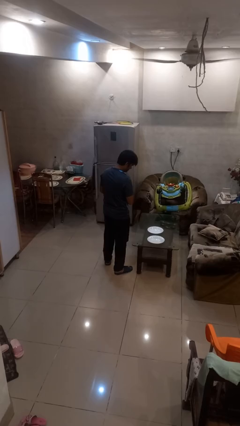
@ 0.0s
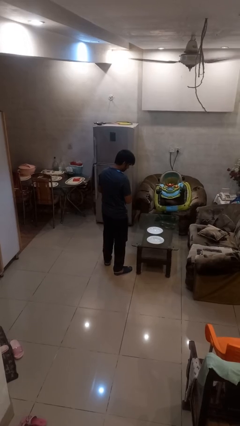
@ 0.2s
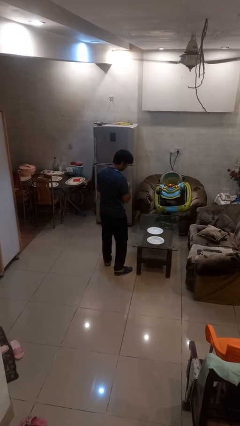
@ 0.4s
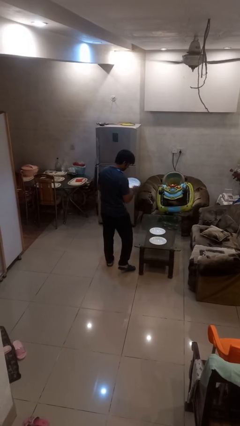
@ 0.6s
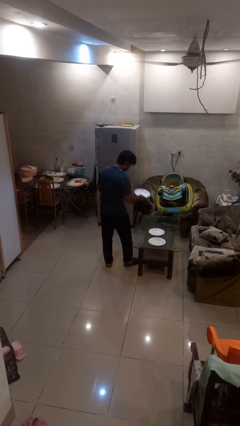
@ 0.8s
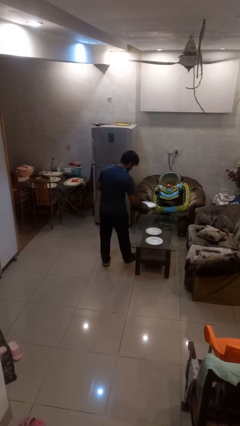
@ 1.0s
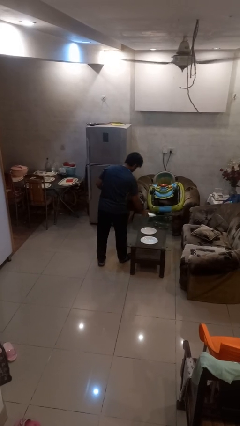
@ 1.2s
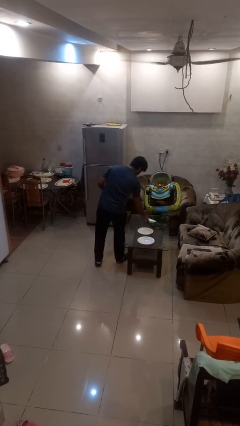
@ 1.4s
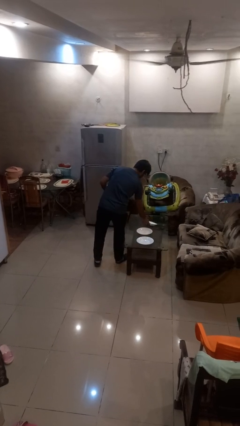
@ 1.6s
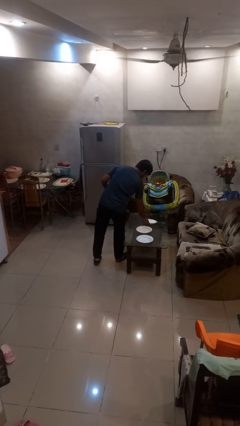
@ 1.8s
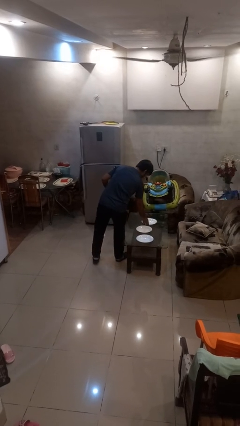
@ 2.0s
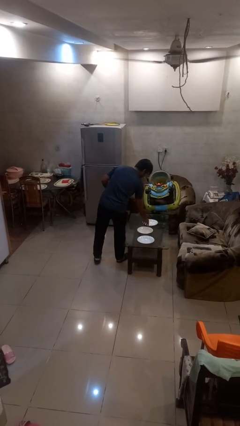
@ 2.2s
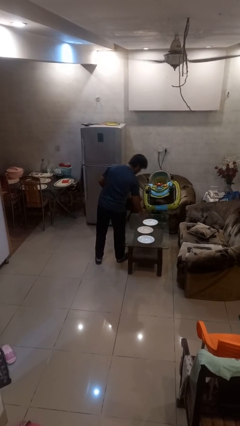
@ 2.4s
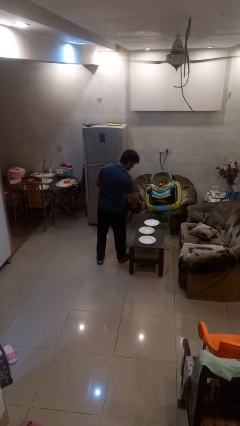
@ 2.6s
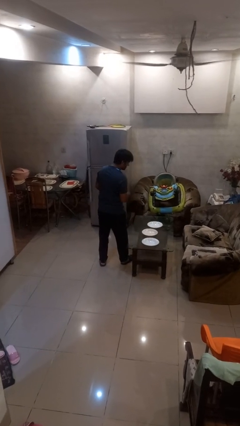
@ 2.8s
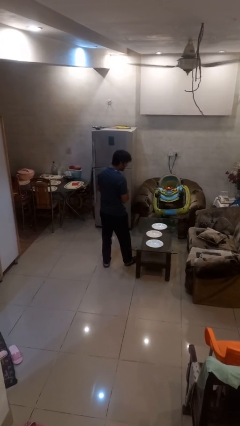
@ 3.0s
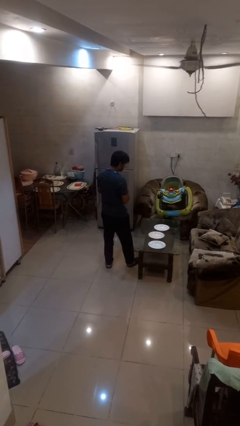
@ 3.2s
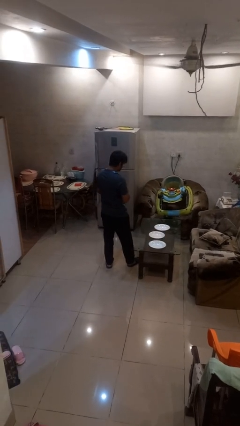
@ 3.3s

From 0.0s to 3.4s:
person sets table

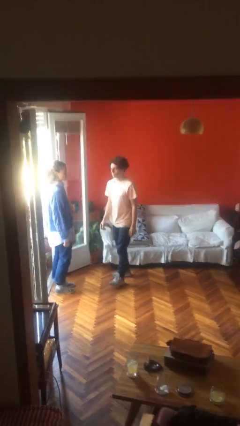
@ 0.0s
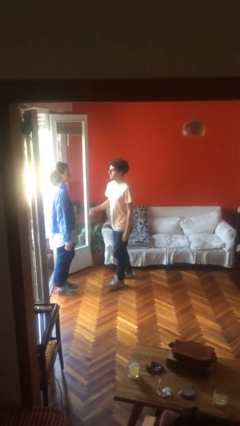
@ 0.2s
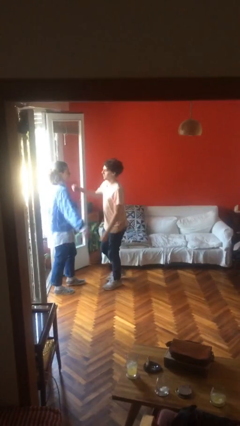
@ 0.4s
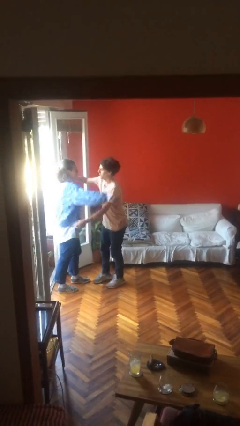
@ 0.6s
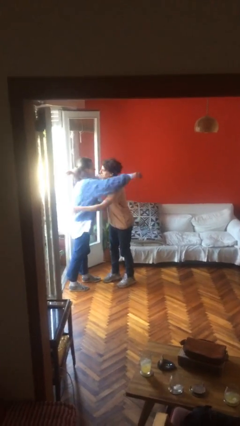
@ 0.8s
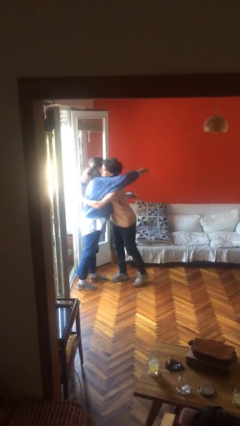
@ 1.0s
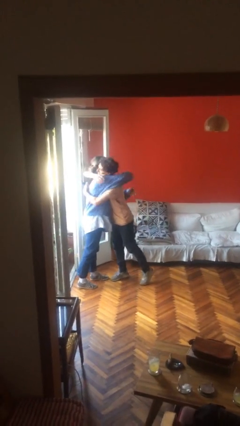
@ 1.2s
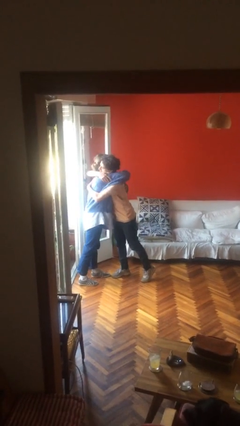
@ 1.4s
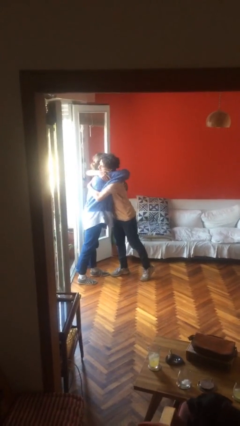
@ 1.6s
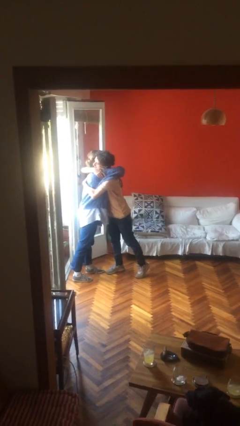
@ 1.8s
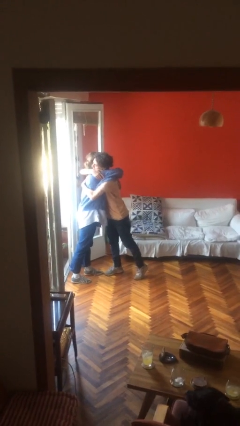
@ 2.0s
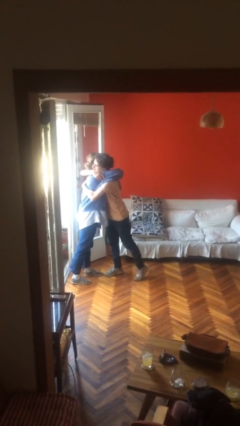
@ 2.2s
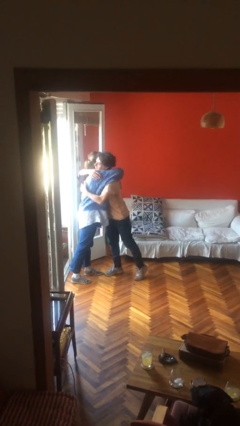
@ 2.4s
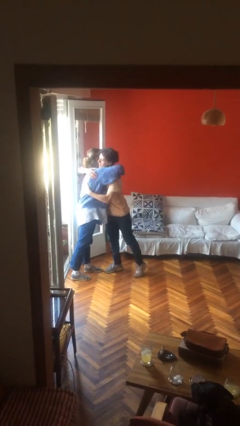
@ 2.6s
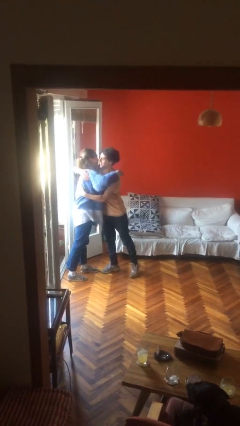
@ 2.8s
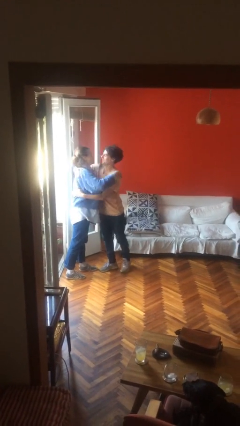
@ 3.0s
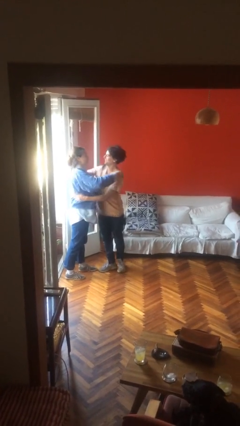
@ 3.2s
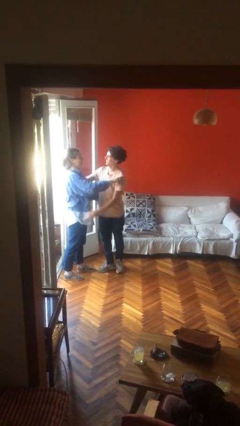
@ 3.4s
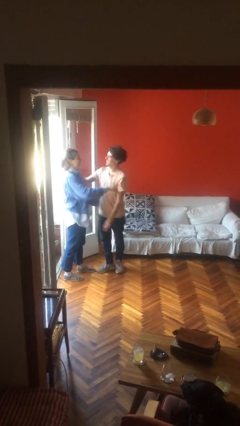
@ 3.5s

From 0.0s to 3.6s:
person embraces person

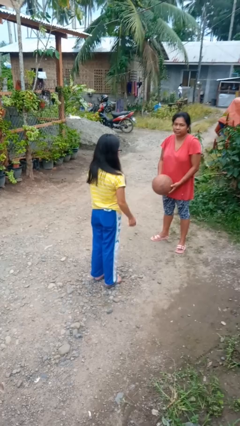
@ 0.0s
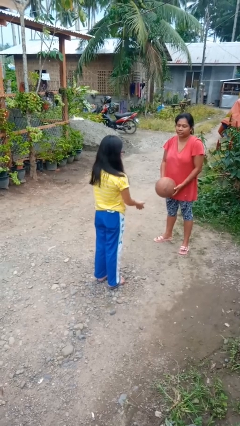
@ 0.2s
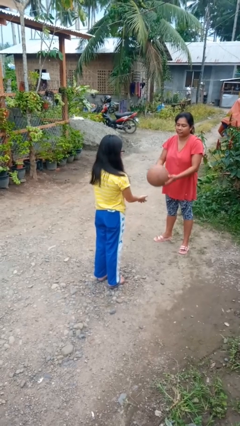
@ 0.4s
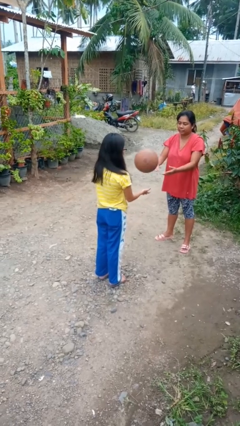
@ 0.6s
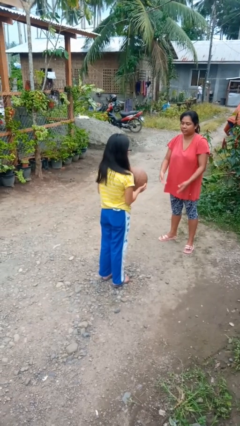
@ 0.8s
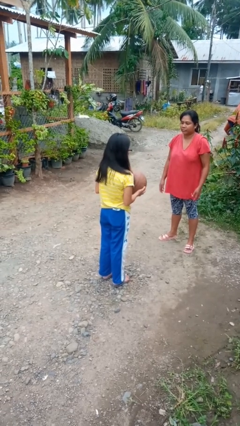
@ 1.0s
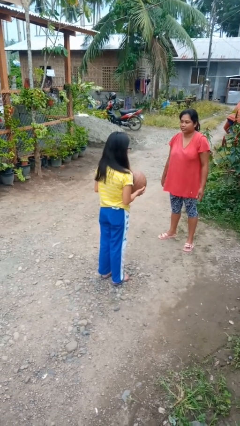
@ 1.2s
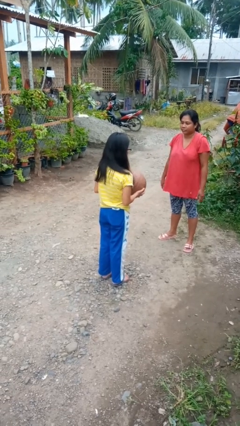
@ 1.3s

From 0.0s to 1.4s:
person catches object from person

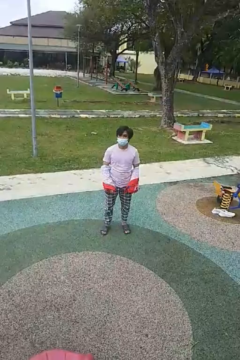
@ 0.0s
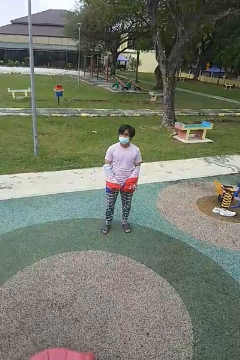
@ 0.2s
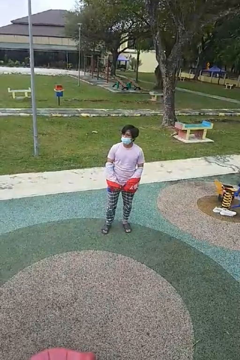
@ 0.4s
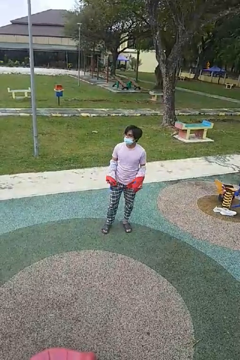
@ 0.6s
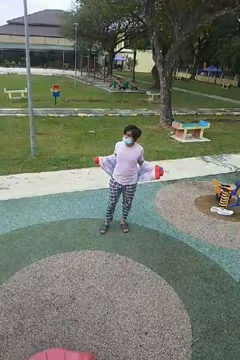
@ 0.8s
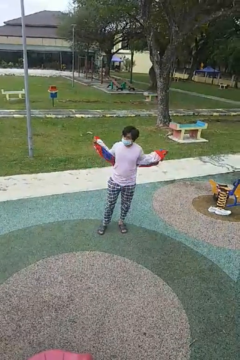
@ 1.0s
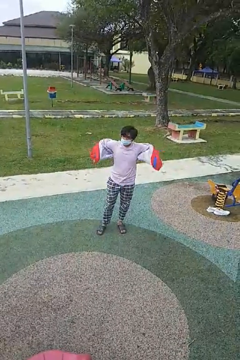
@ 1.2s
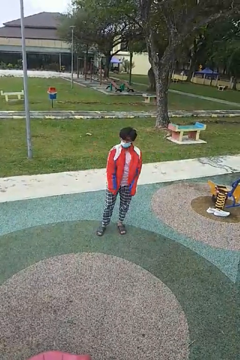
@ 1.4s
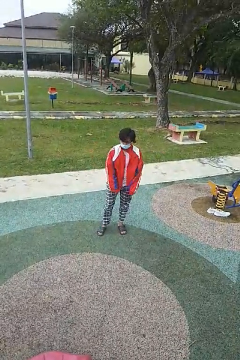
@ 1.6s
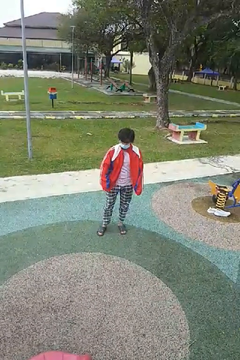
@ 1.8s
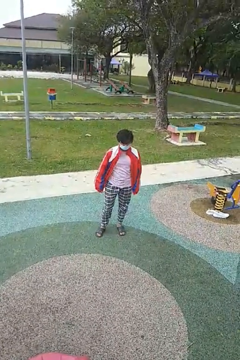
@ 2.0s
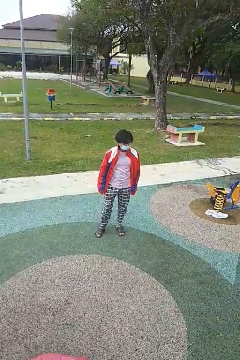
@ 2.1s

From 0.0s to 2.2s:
person puts on jacket

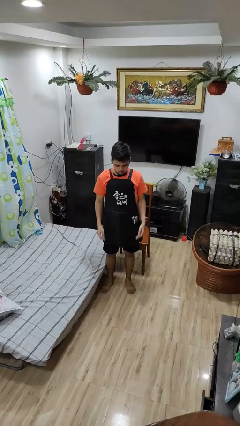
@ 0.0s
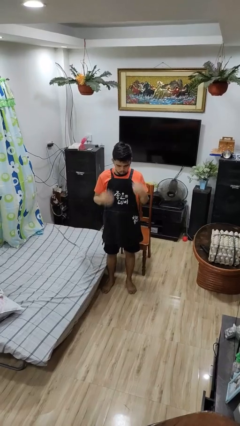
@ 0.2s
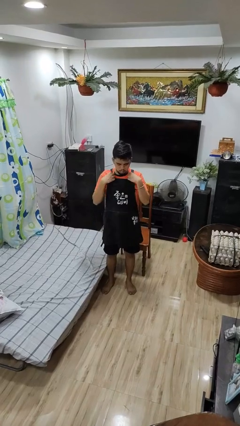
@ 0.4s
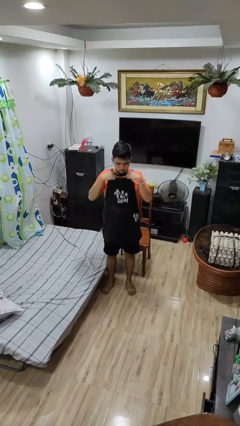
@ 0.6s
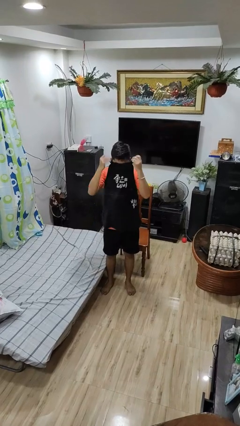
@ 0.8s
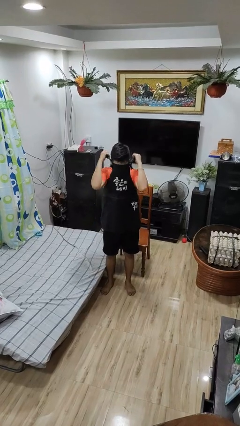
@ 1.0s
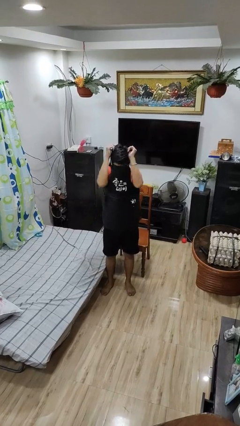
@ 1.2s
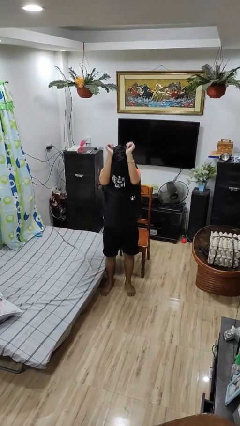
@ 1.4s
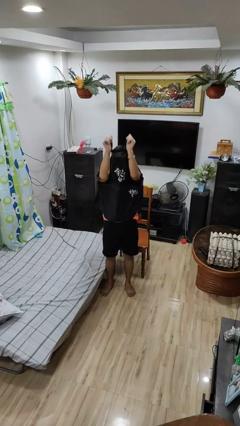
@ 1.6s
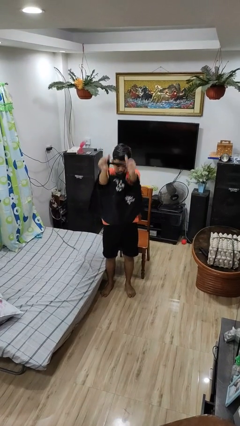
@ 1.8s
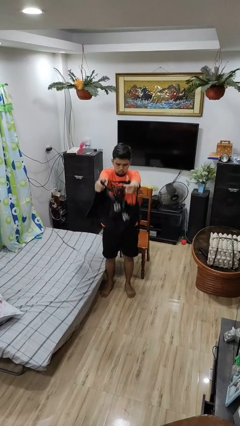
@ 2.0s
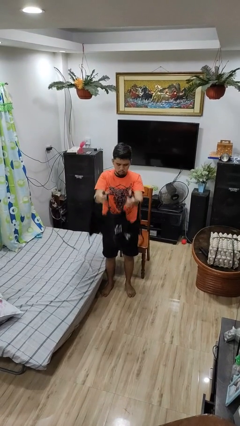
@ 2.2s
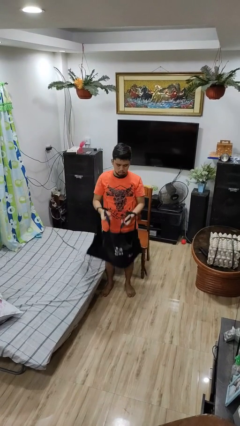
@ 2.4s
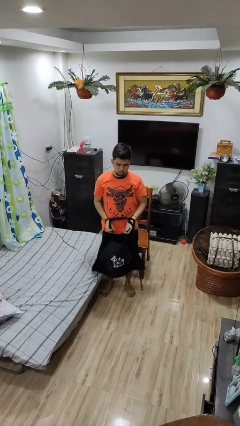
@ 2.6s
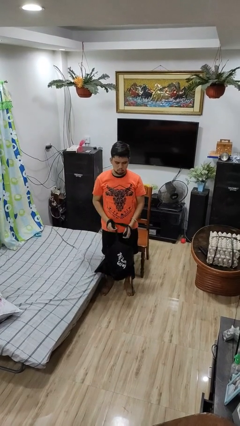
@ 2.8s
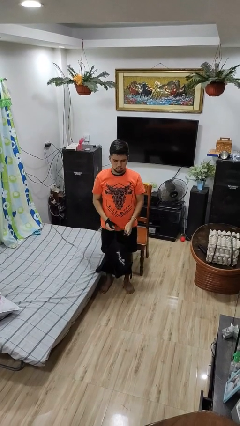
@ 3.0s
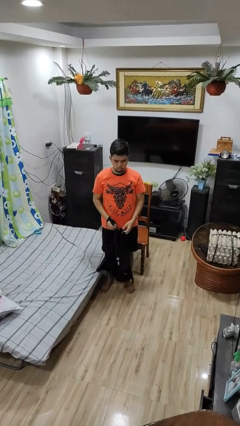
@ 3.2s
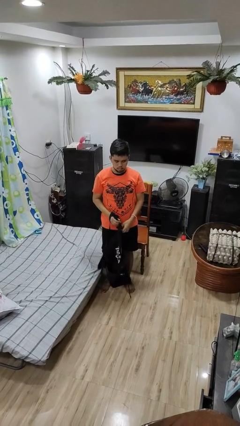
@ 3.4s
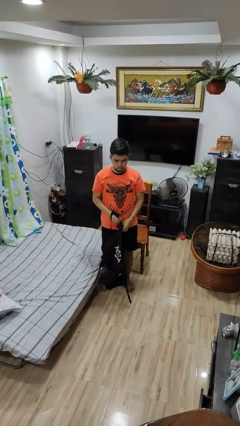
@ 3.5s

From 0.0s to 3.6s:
person takes off apron

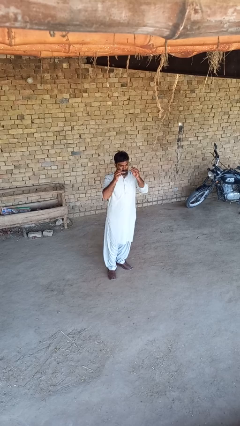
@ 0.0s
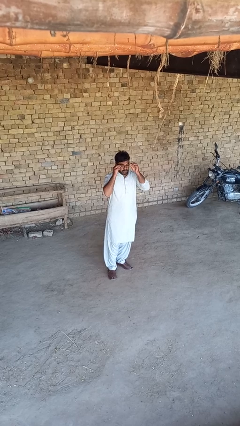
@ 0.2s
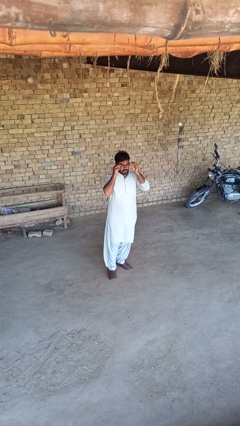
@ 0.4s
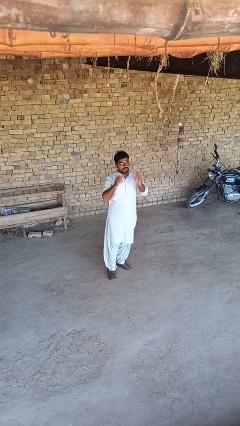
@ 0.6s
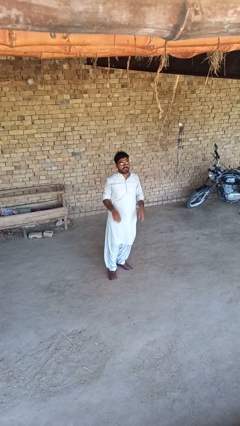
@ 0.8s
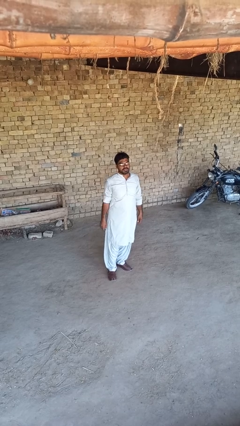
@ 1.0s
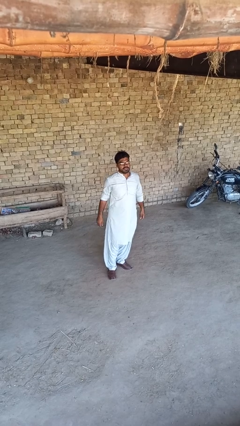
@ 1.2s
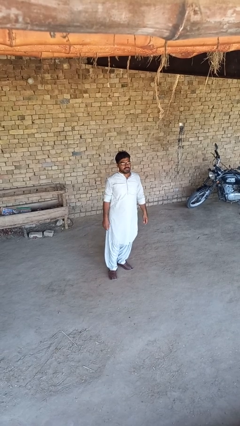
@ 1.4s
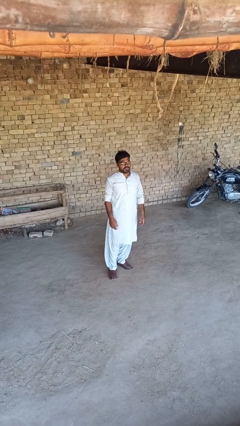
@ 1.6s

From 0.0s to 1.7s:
person puts on glasses

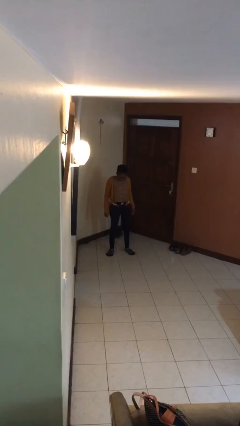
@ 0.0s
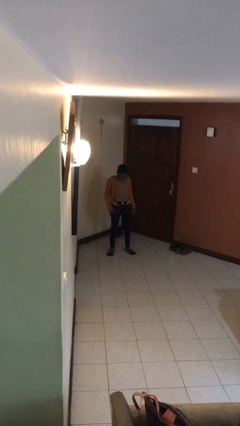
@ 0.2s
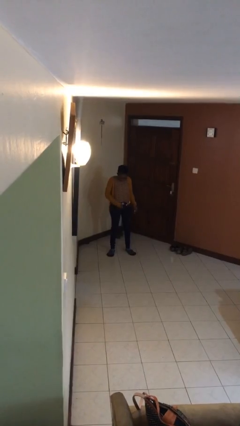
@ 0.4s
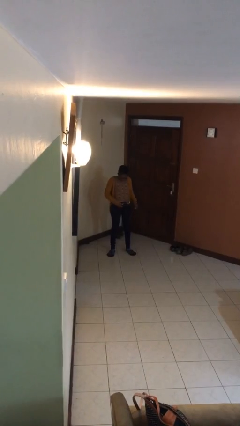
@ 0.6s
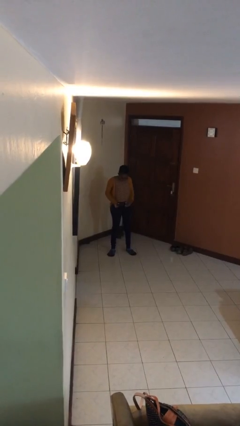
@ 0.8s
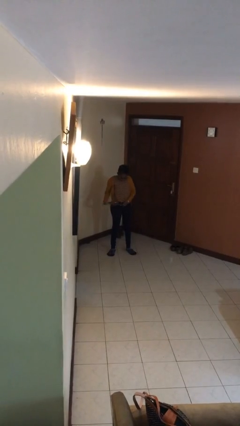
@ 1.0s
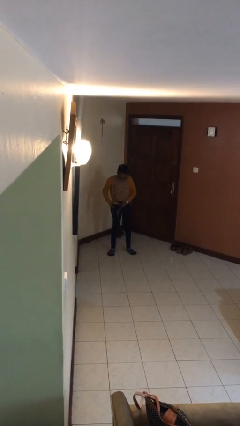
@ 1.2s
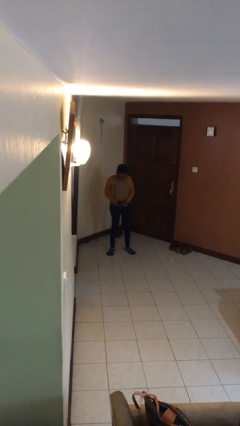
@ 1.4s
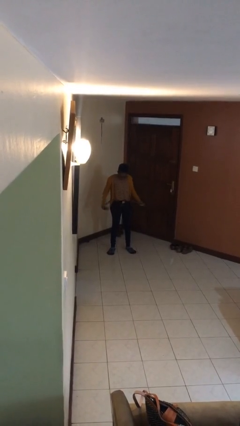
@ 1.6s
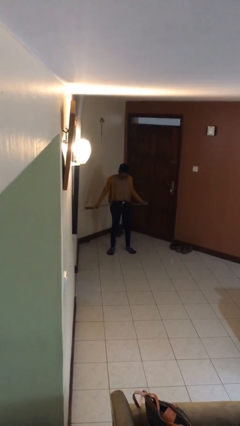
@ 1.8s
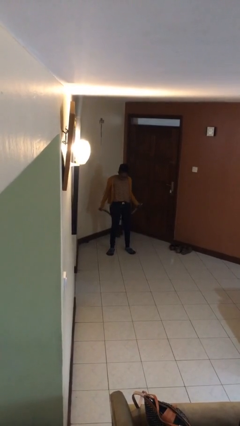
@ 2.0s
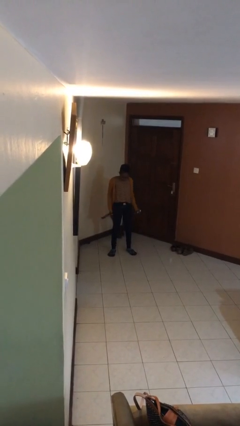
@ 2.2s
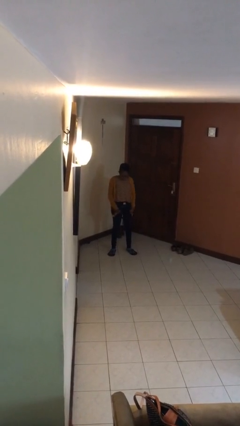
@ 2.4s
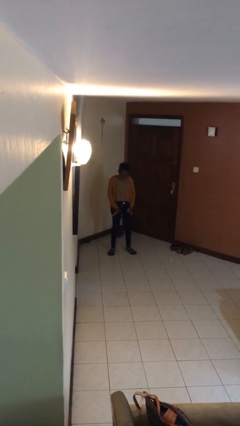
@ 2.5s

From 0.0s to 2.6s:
person takes off belt
